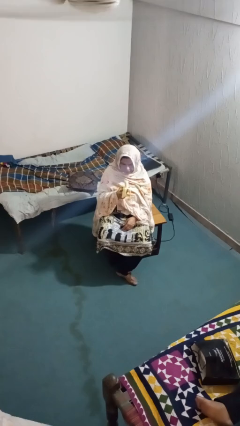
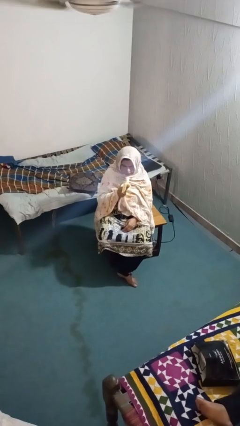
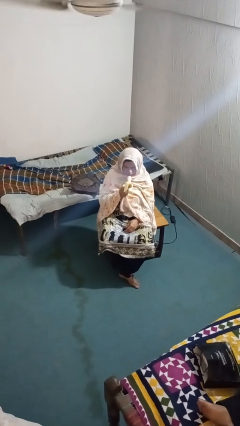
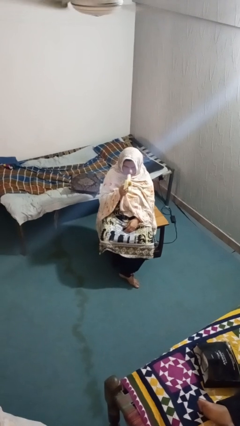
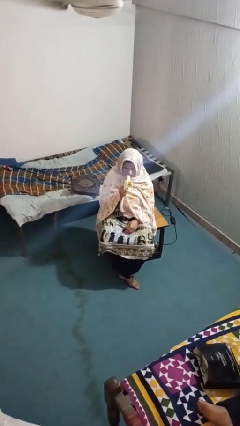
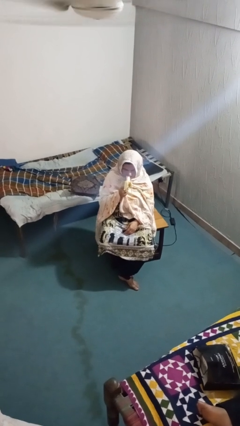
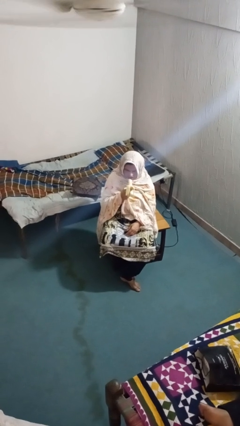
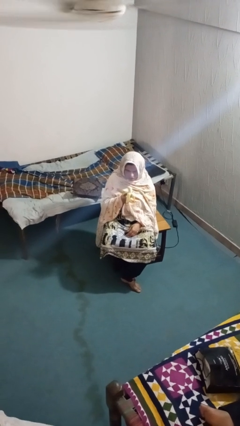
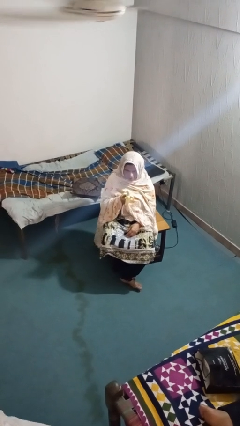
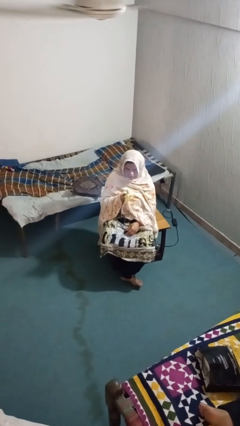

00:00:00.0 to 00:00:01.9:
person eats banana

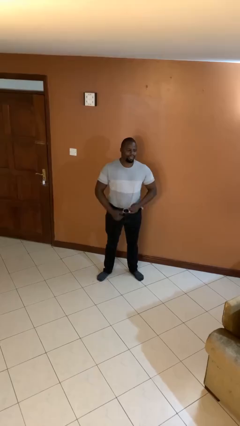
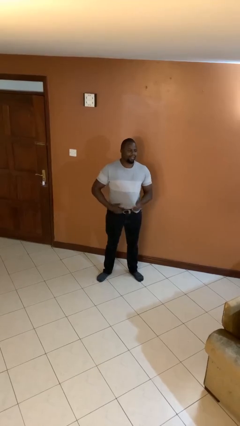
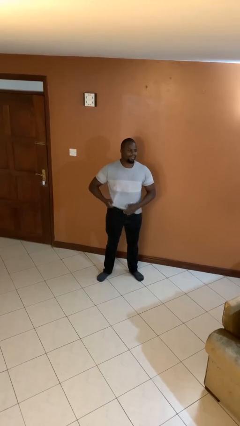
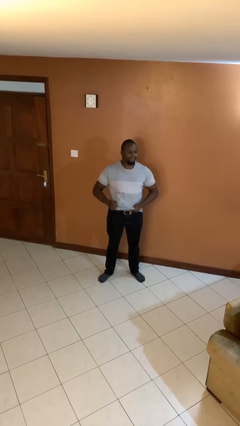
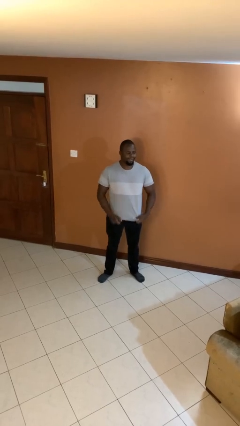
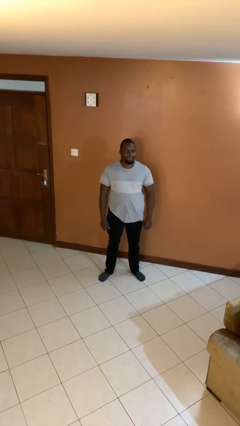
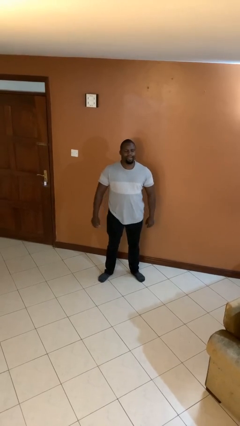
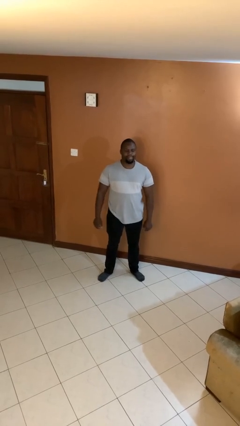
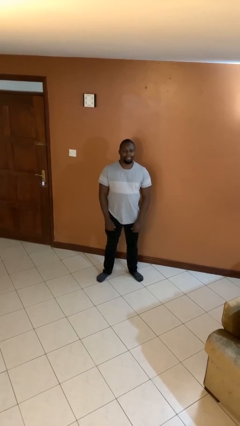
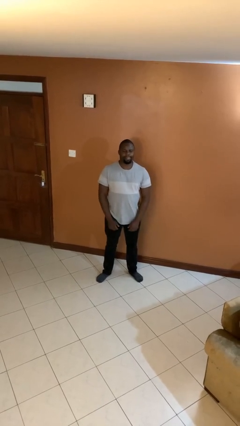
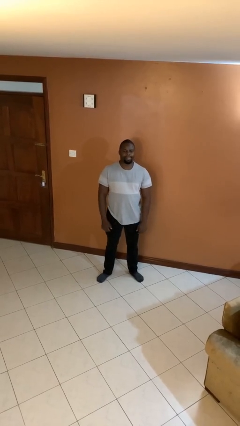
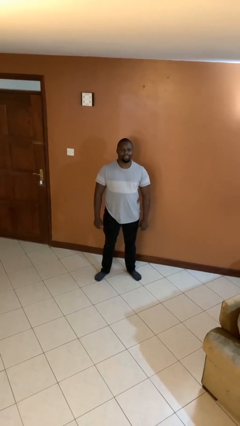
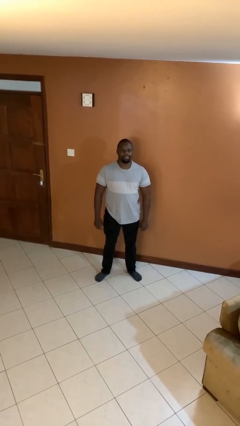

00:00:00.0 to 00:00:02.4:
person untucks shirt

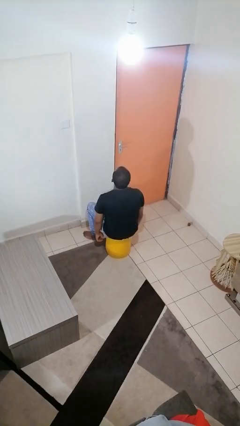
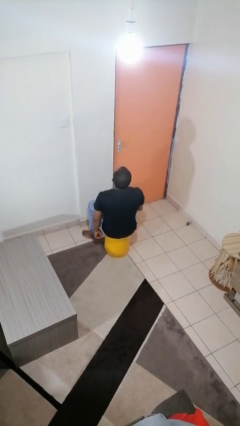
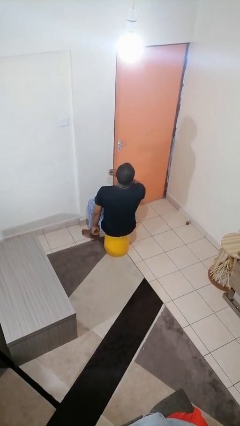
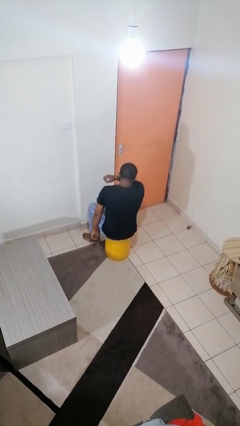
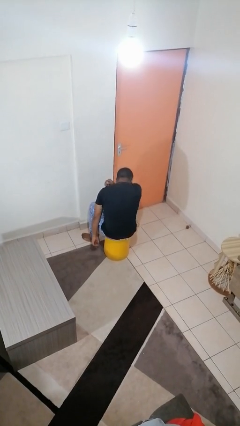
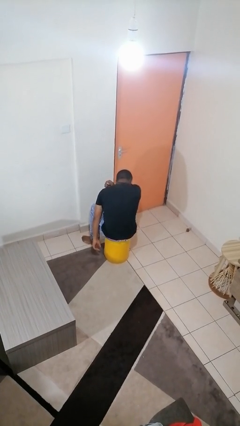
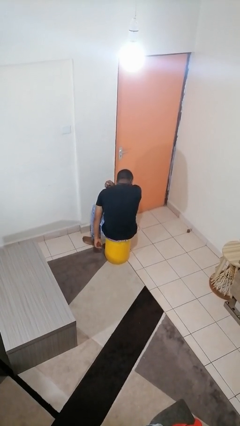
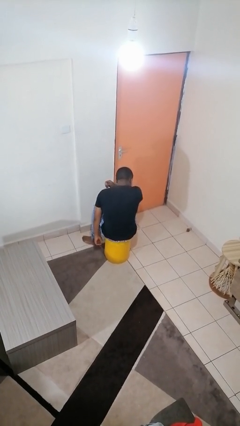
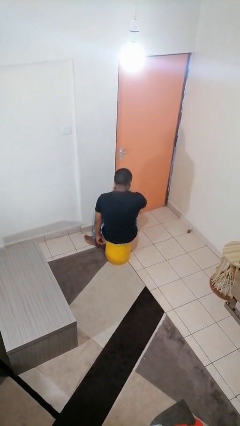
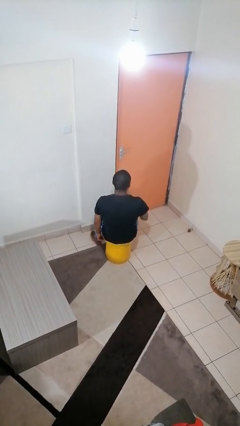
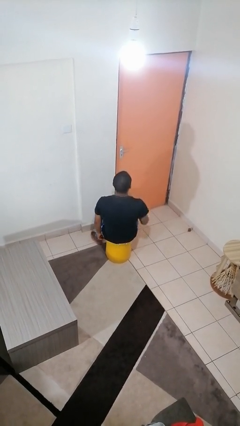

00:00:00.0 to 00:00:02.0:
person sneezes into arm

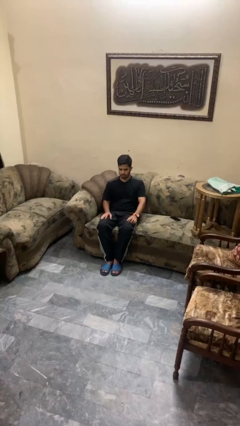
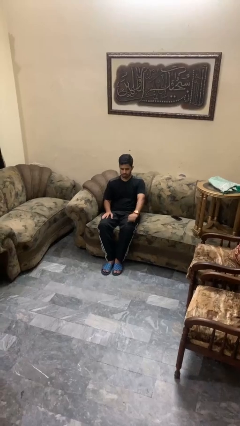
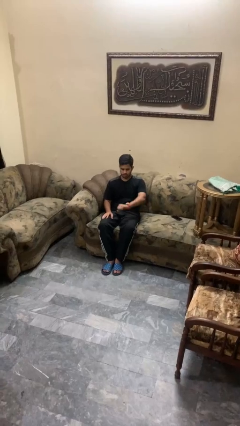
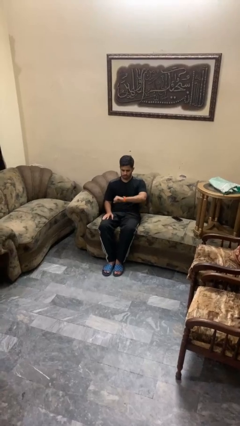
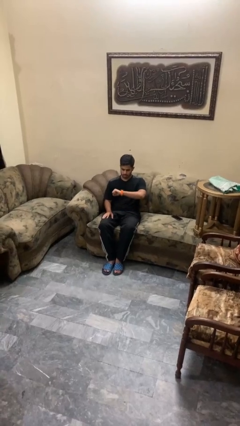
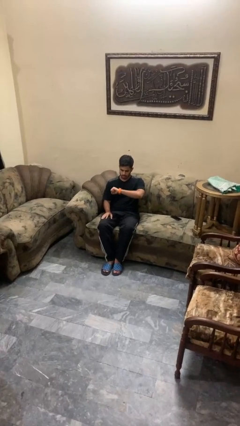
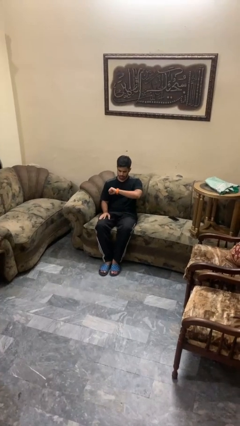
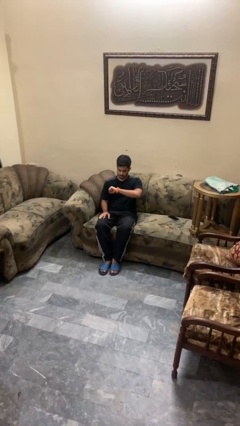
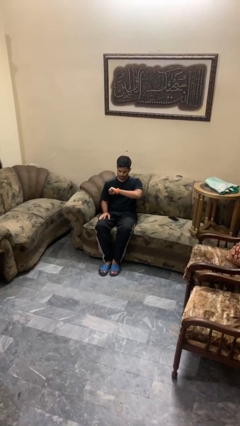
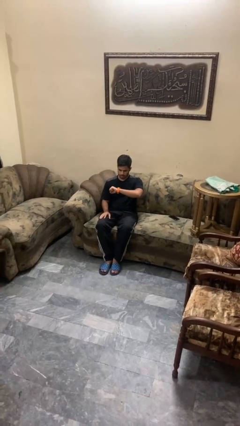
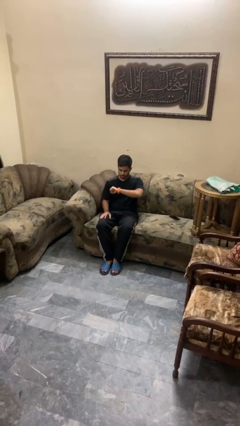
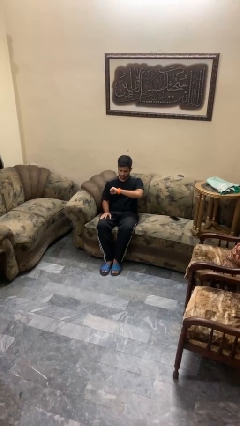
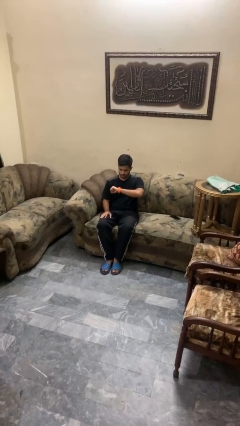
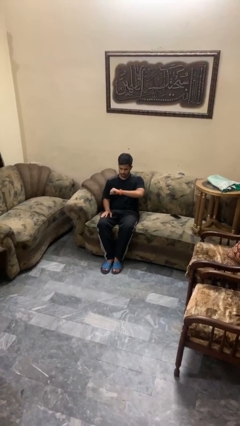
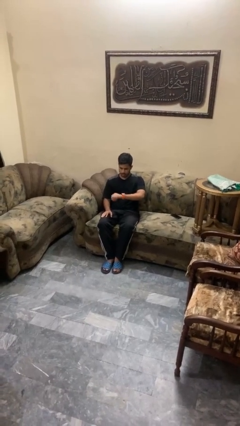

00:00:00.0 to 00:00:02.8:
person looks at wristwatch

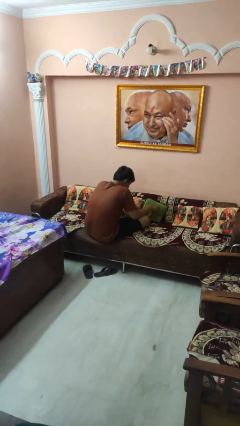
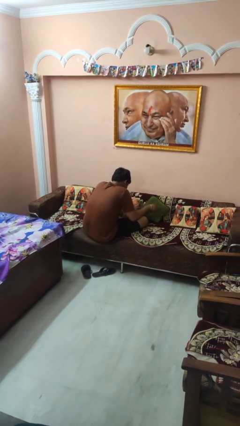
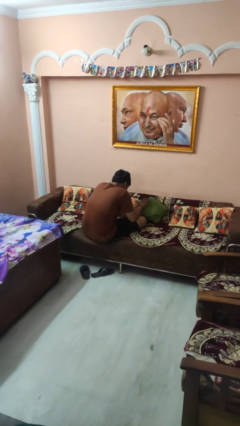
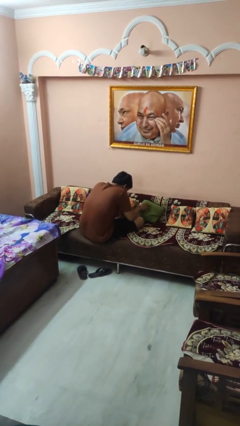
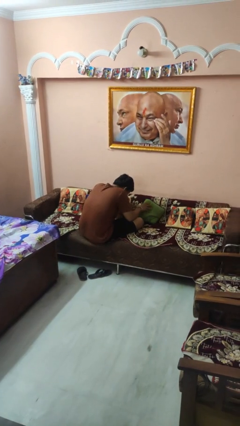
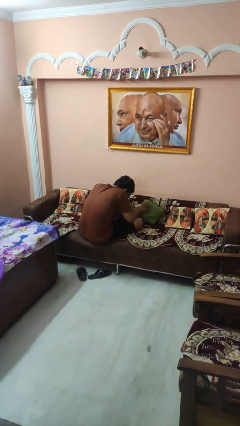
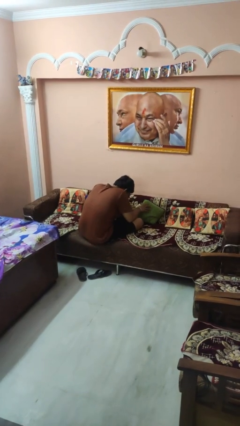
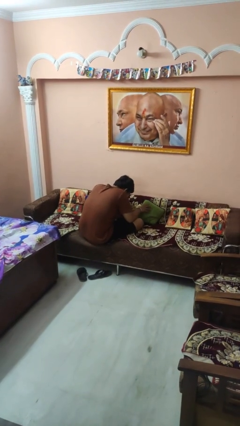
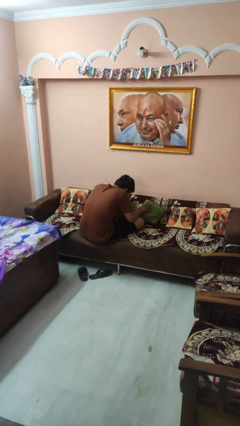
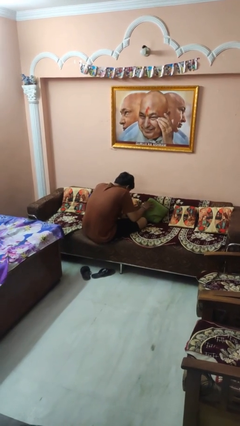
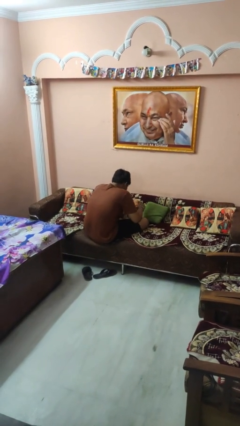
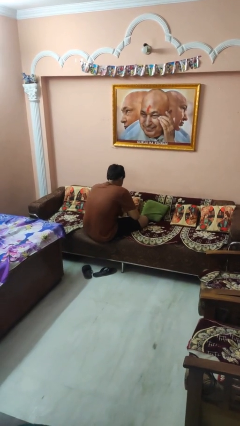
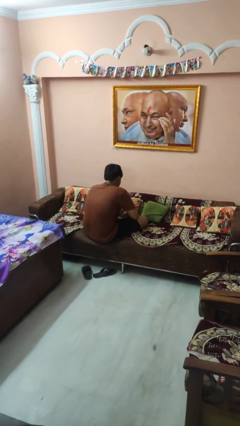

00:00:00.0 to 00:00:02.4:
person searches in couch

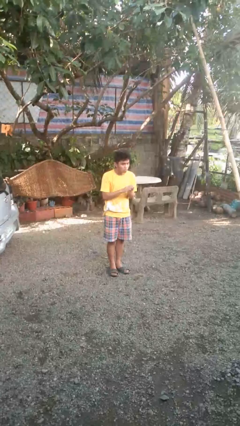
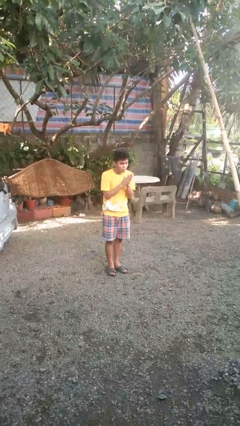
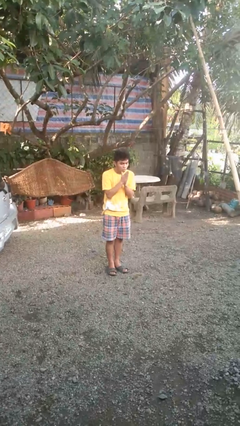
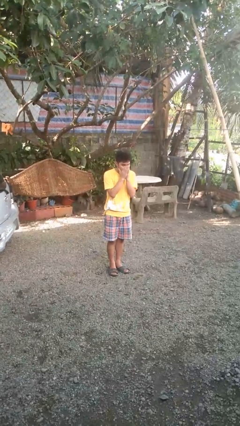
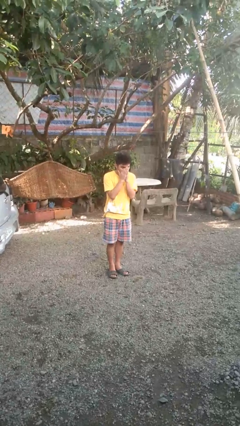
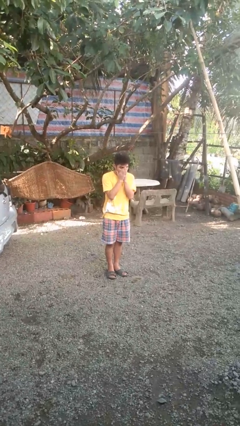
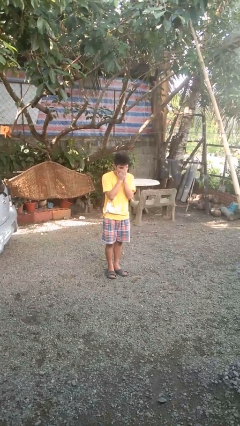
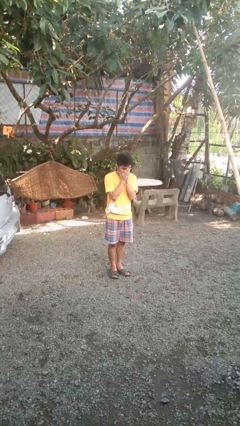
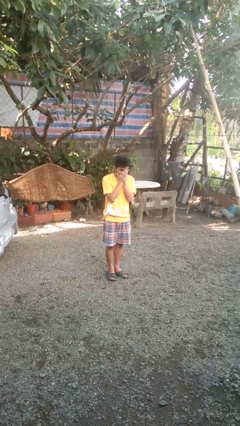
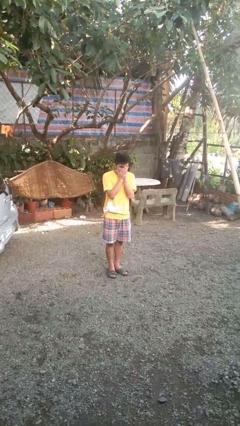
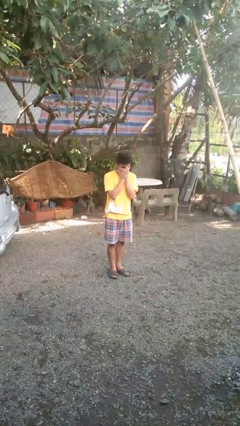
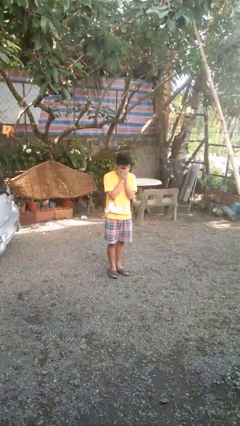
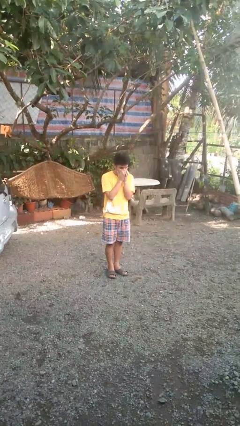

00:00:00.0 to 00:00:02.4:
person blows into hands

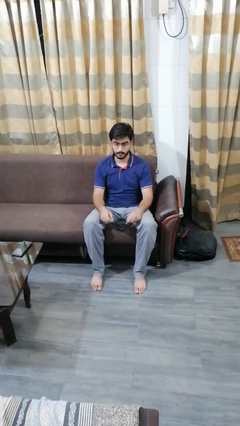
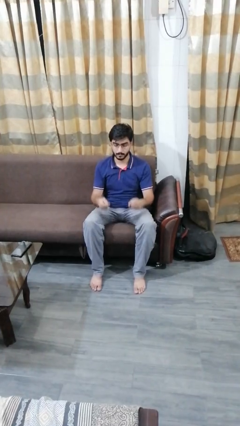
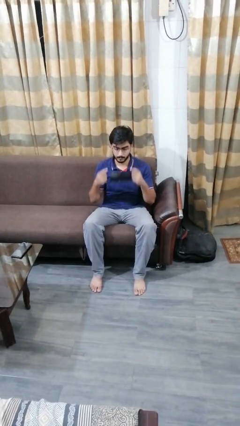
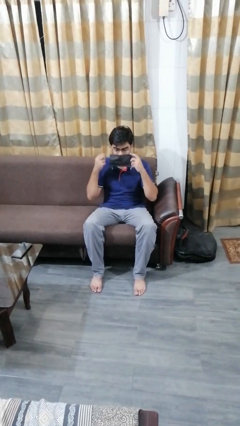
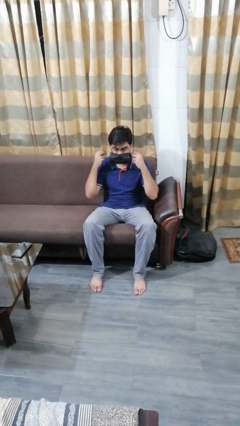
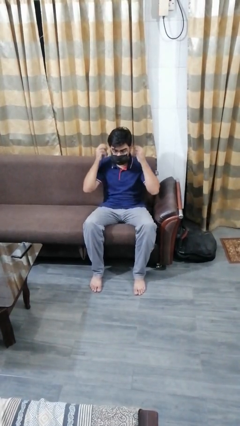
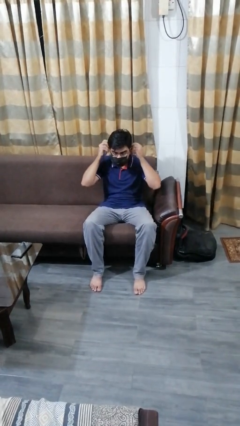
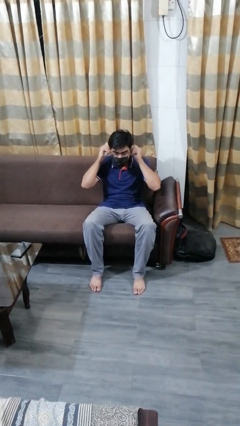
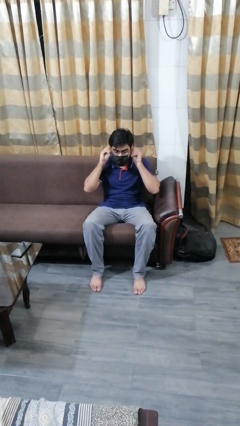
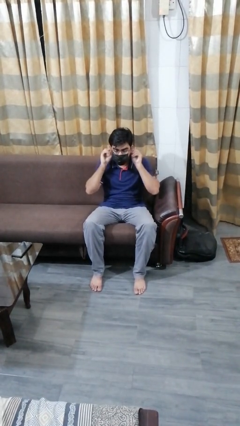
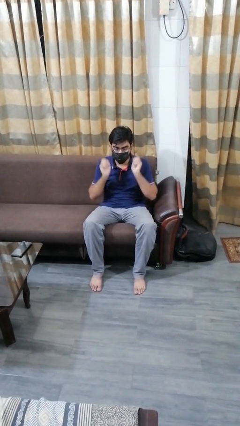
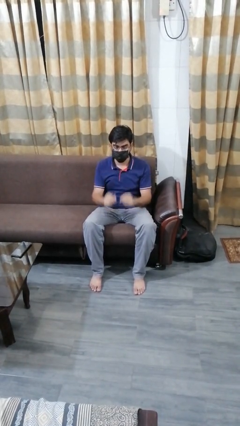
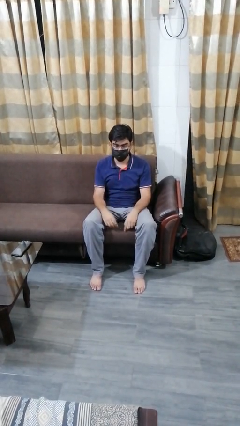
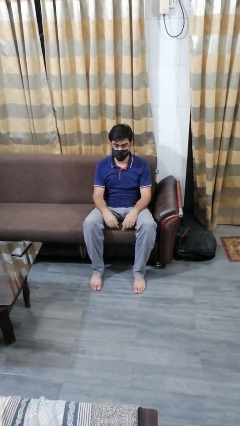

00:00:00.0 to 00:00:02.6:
person puts on facemask
